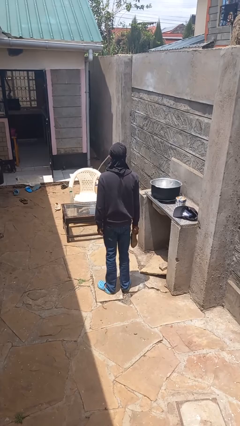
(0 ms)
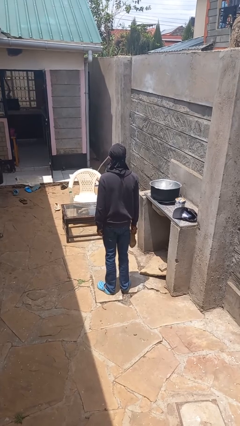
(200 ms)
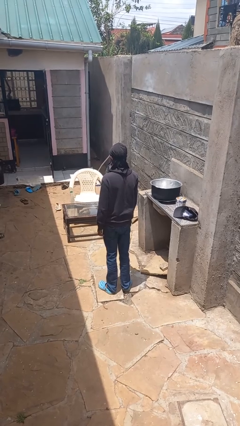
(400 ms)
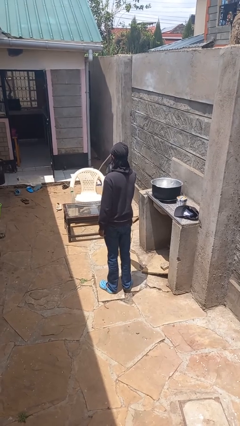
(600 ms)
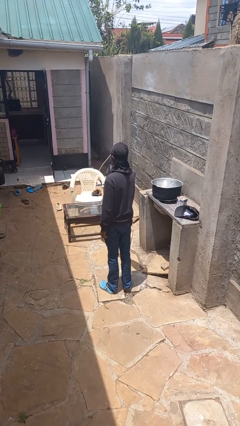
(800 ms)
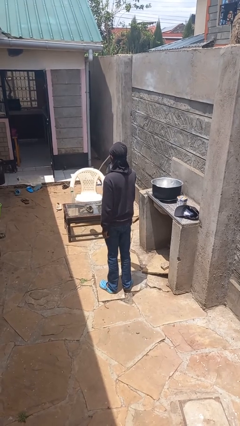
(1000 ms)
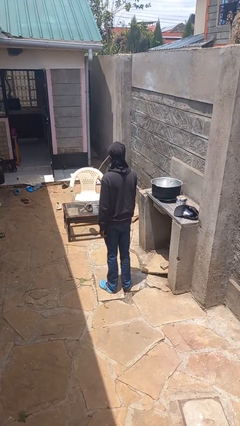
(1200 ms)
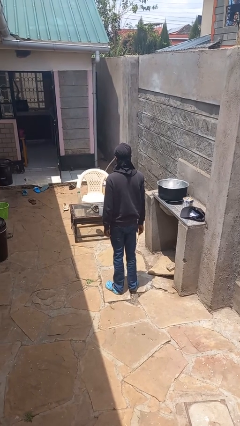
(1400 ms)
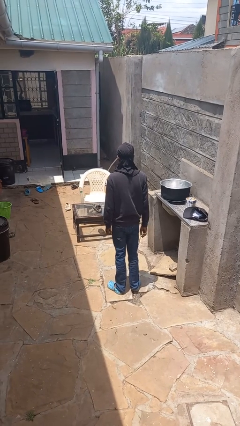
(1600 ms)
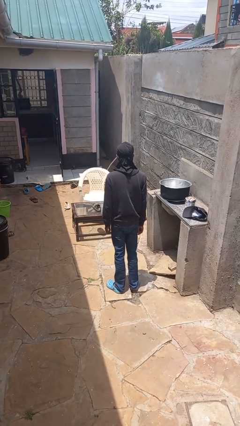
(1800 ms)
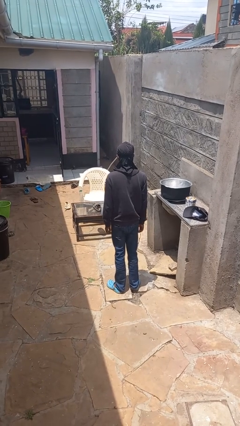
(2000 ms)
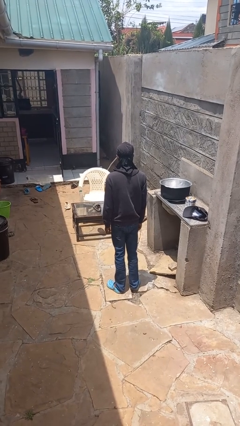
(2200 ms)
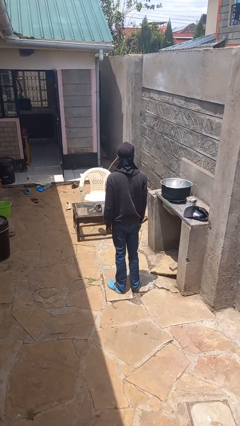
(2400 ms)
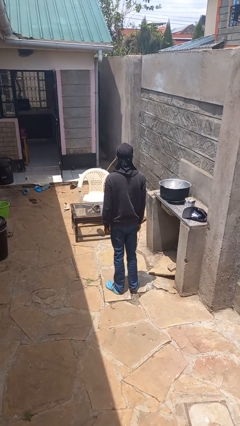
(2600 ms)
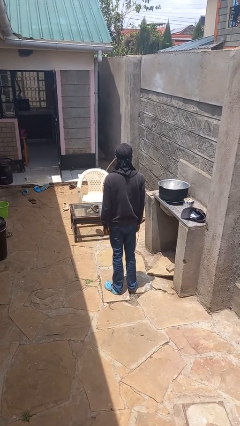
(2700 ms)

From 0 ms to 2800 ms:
person throws object on table

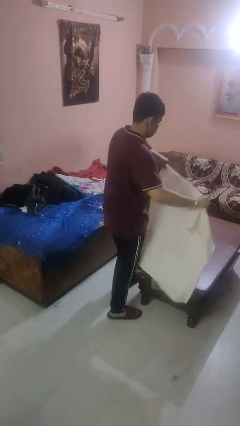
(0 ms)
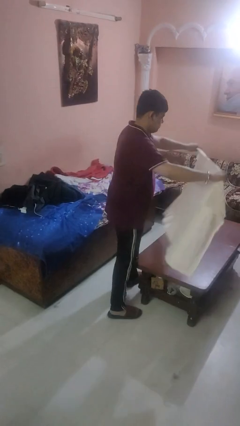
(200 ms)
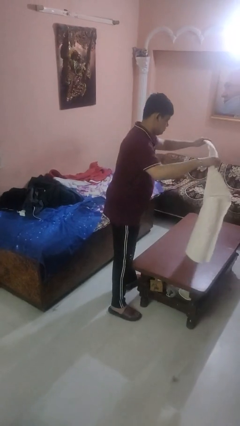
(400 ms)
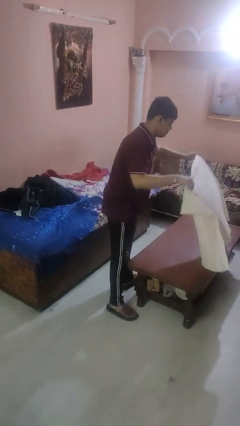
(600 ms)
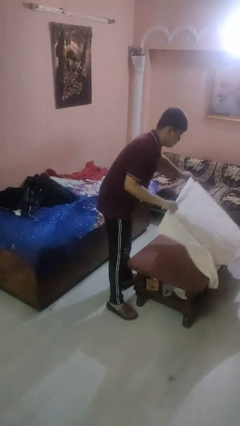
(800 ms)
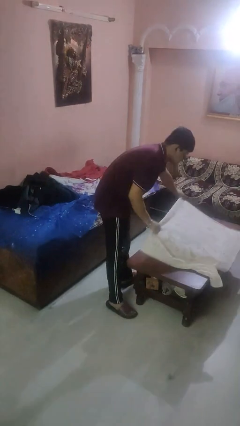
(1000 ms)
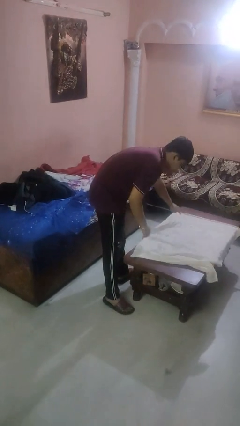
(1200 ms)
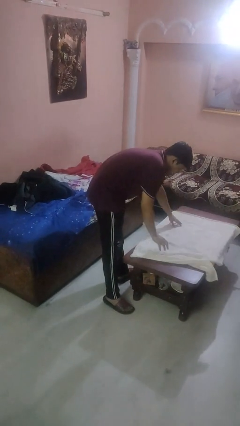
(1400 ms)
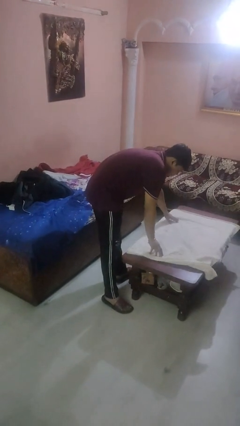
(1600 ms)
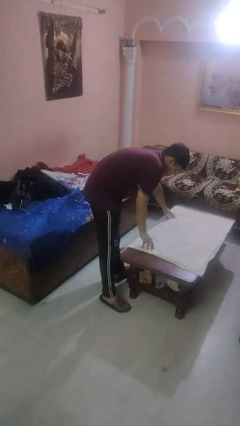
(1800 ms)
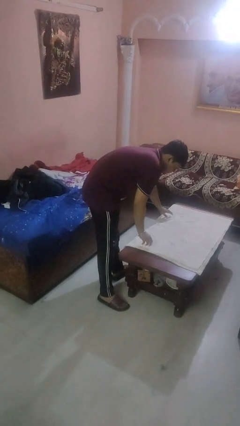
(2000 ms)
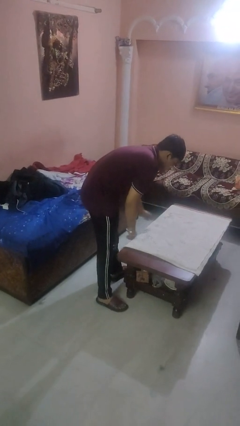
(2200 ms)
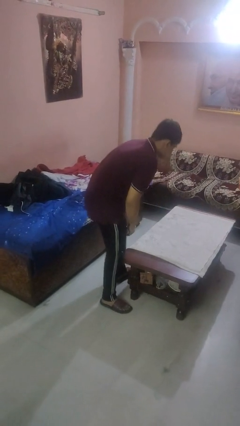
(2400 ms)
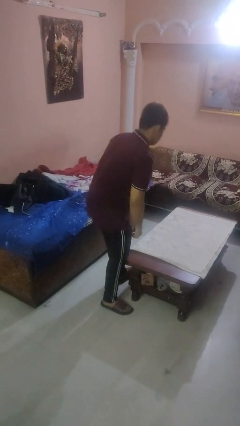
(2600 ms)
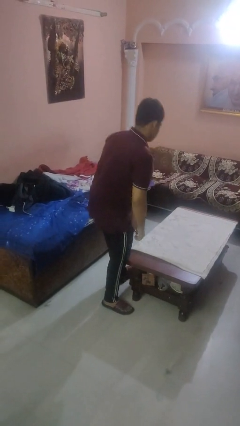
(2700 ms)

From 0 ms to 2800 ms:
person spreads tablecloth

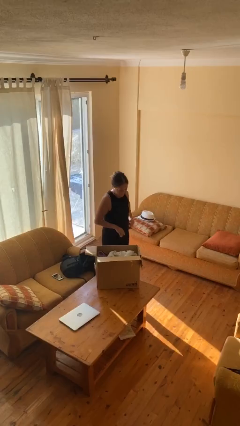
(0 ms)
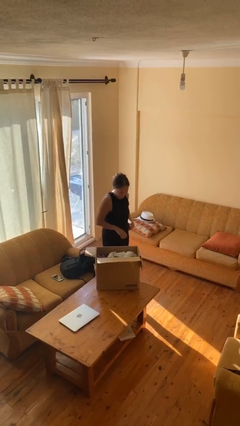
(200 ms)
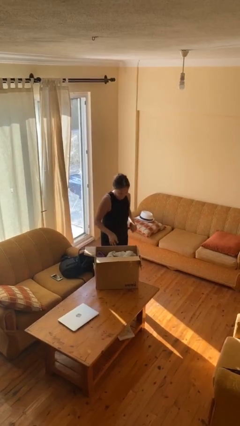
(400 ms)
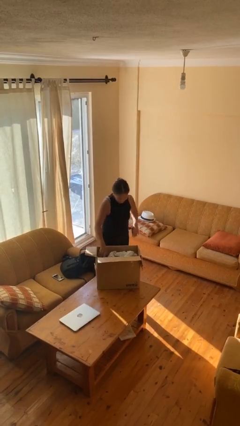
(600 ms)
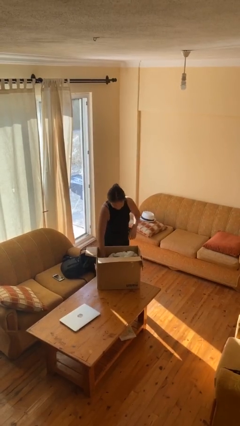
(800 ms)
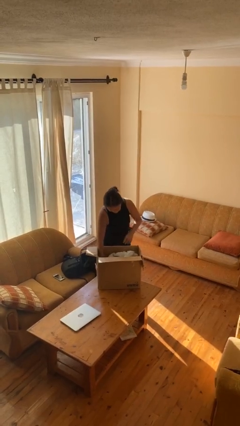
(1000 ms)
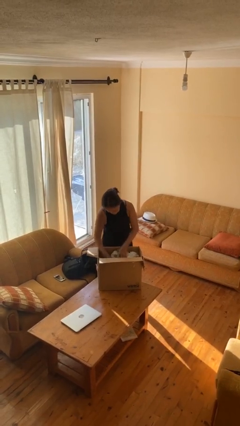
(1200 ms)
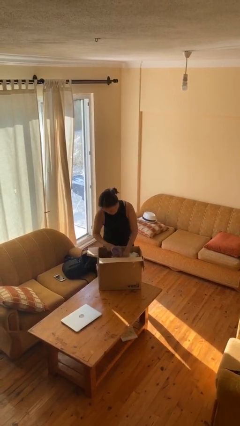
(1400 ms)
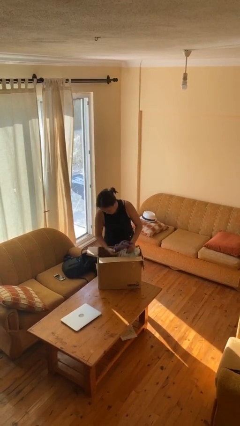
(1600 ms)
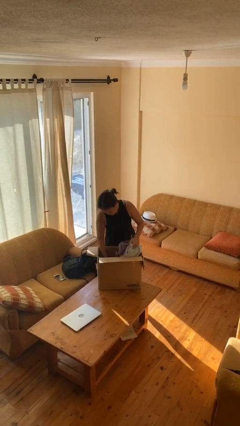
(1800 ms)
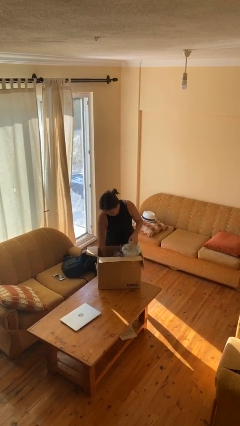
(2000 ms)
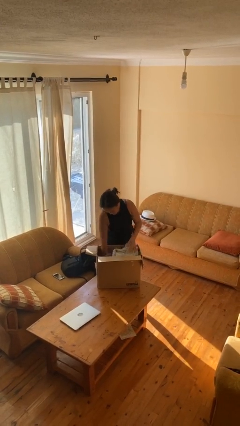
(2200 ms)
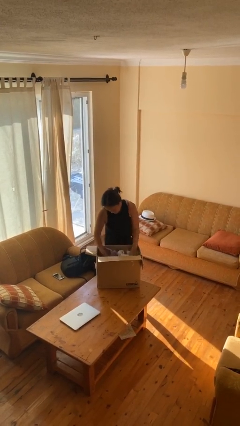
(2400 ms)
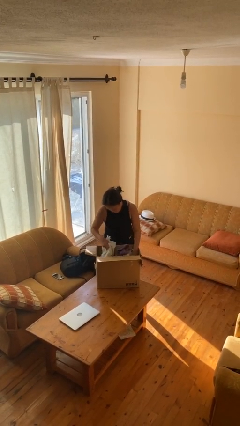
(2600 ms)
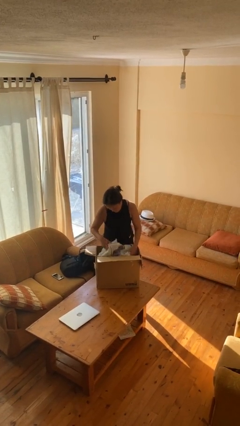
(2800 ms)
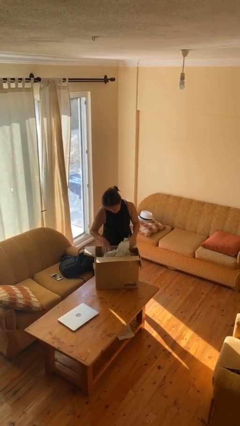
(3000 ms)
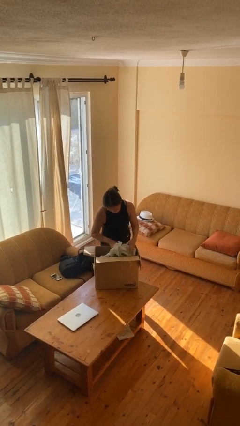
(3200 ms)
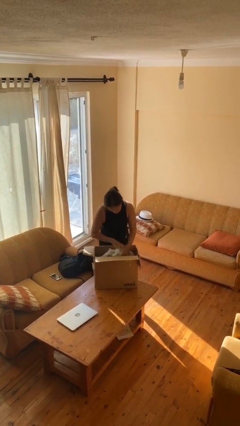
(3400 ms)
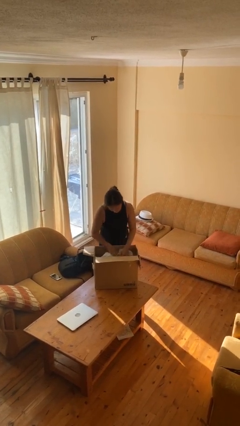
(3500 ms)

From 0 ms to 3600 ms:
person searches in box

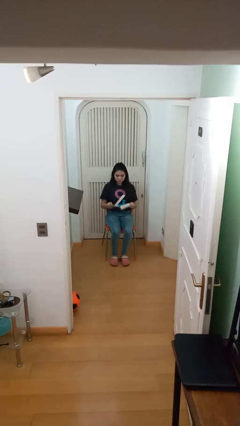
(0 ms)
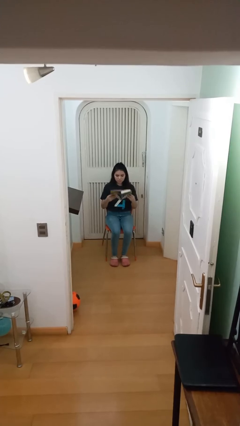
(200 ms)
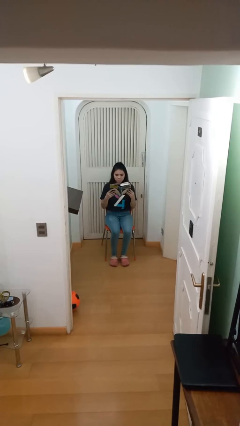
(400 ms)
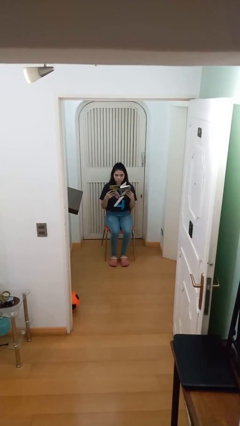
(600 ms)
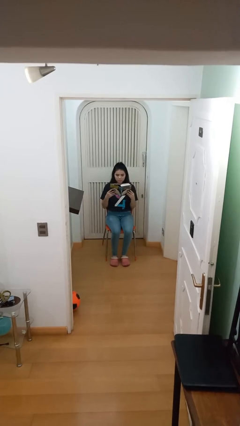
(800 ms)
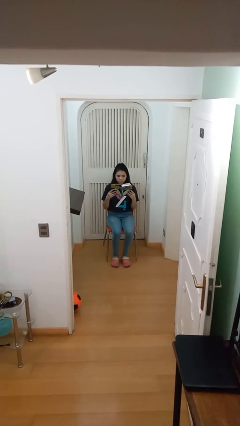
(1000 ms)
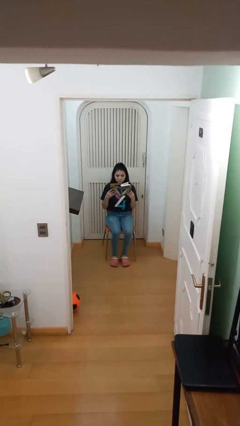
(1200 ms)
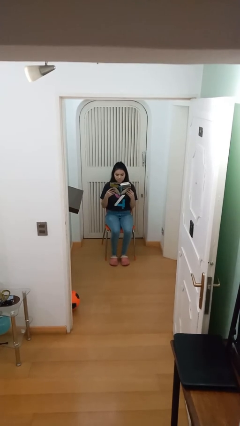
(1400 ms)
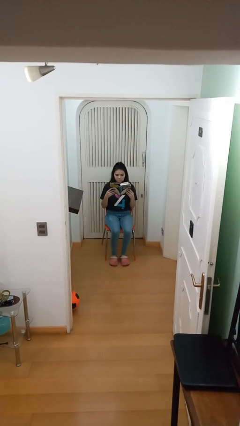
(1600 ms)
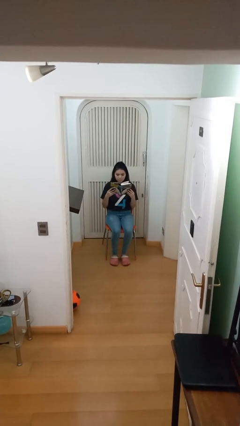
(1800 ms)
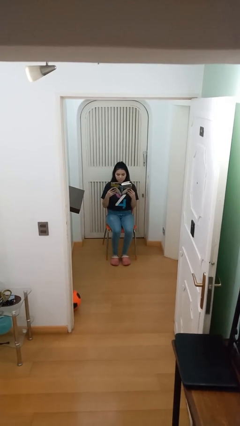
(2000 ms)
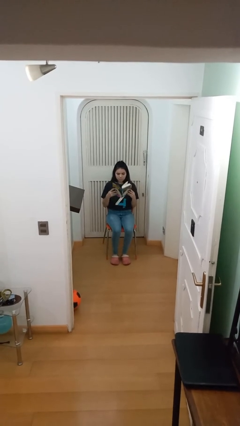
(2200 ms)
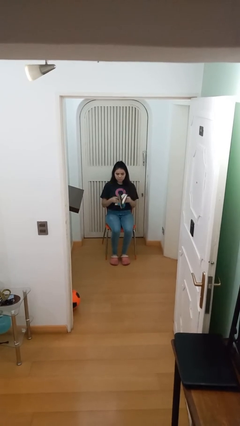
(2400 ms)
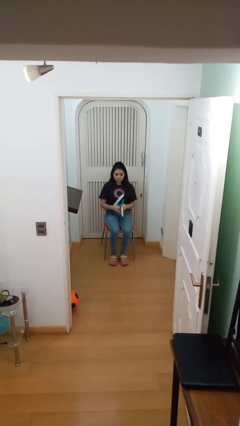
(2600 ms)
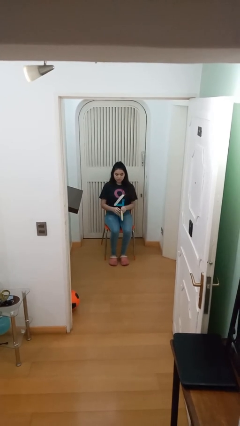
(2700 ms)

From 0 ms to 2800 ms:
person reads document

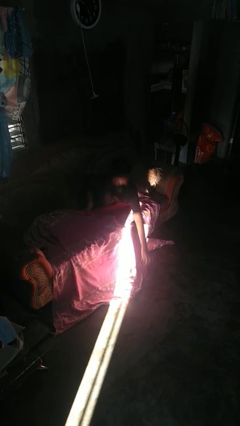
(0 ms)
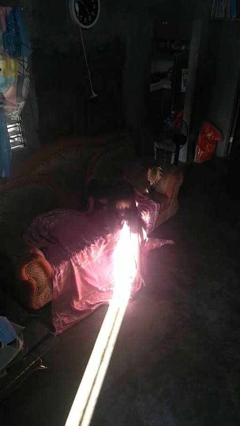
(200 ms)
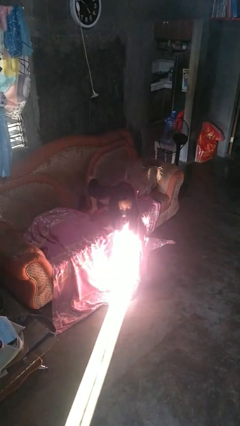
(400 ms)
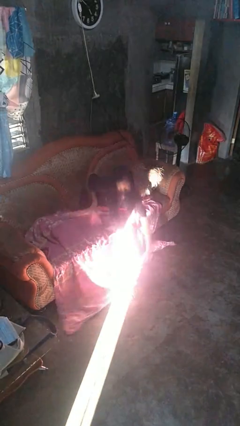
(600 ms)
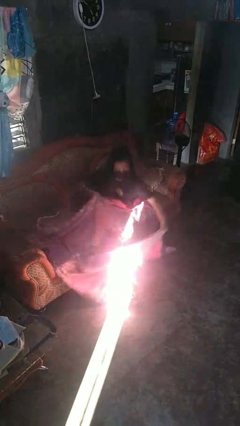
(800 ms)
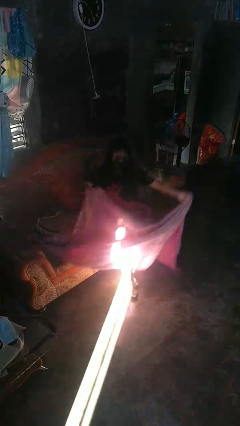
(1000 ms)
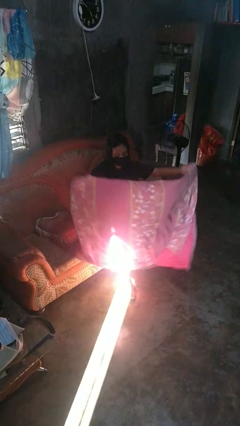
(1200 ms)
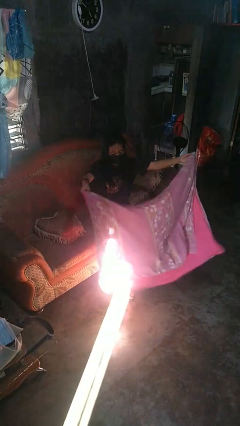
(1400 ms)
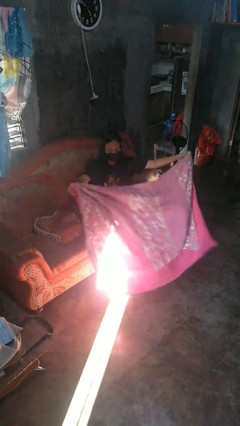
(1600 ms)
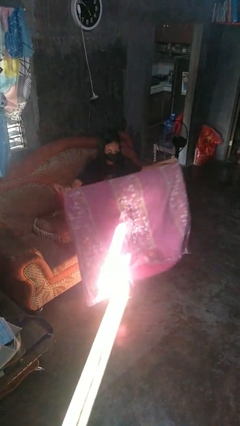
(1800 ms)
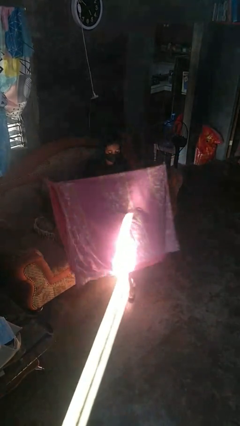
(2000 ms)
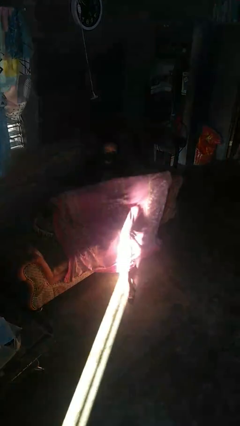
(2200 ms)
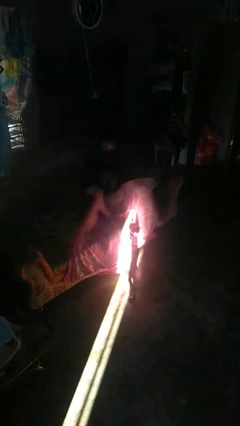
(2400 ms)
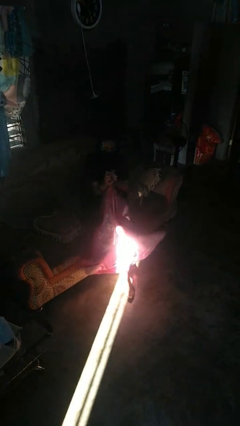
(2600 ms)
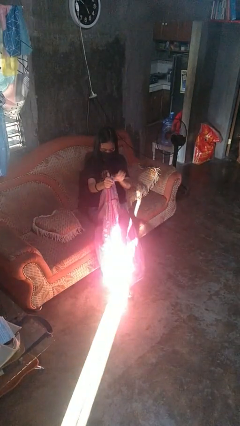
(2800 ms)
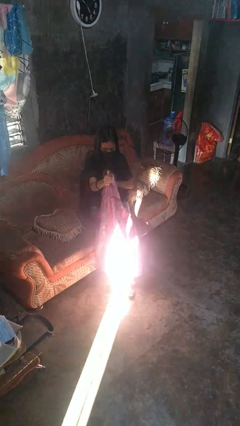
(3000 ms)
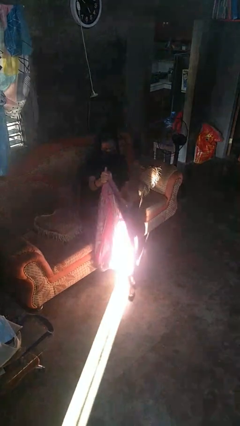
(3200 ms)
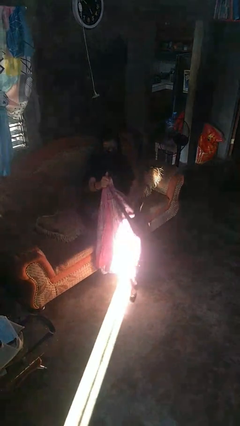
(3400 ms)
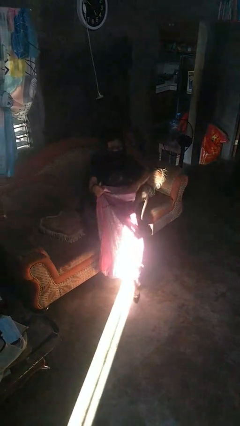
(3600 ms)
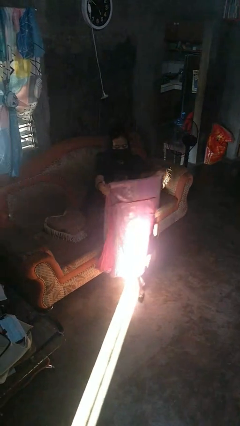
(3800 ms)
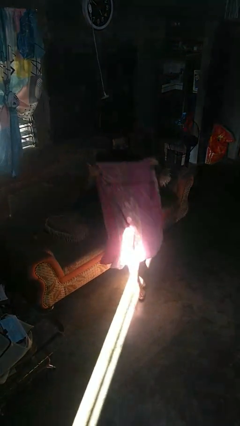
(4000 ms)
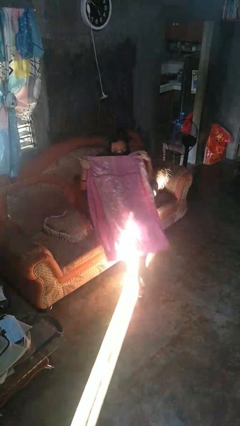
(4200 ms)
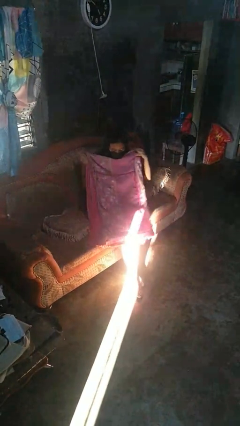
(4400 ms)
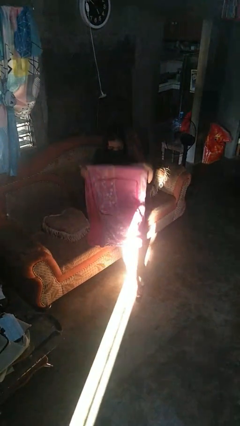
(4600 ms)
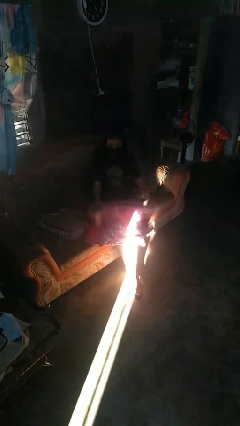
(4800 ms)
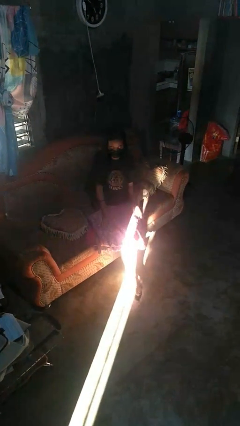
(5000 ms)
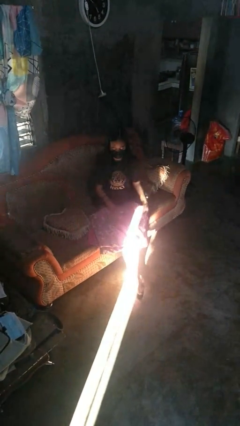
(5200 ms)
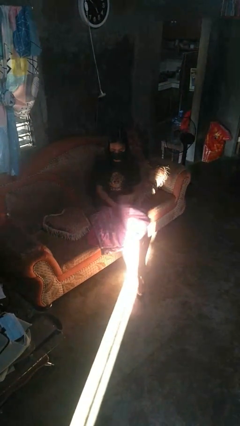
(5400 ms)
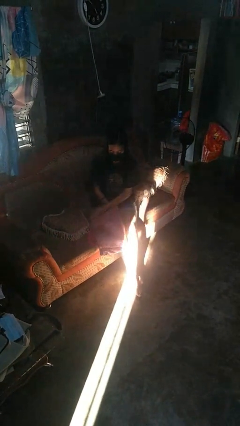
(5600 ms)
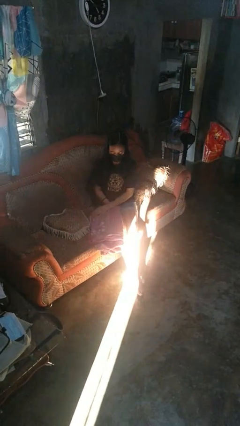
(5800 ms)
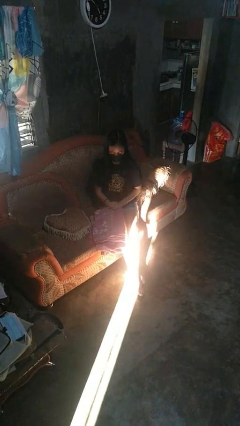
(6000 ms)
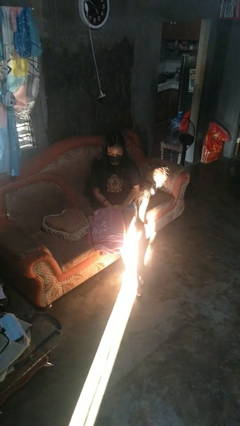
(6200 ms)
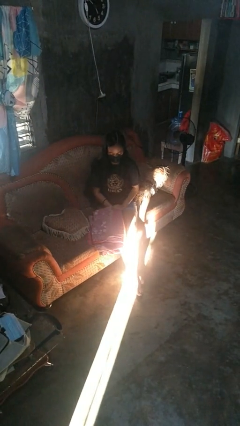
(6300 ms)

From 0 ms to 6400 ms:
person folds blanket
